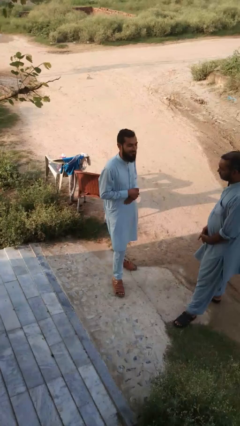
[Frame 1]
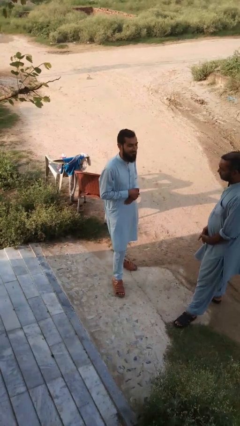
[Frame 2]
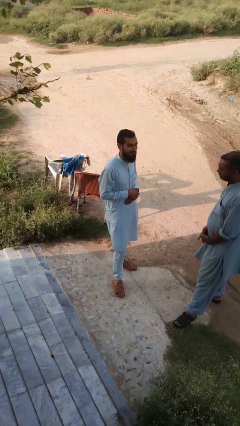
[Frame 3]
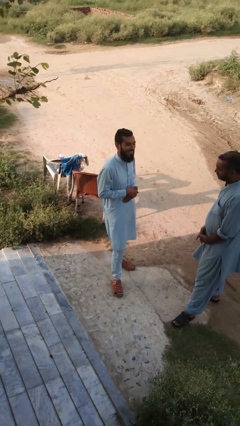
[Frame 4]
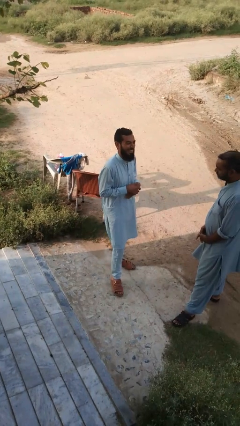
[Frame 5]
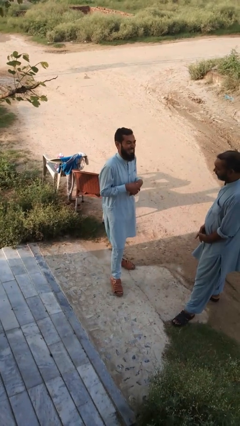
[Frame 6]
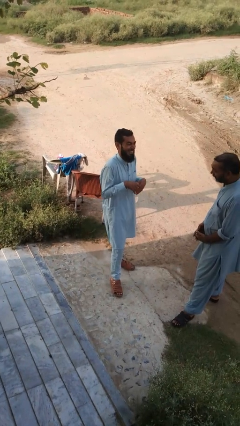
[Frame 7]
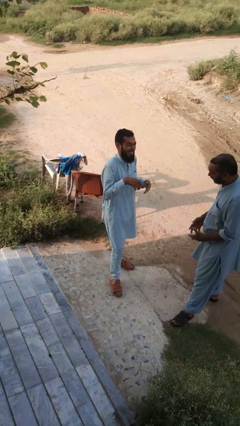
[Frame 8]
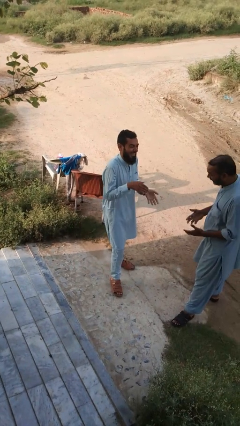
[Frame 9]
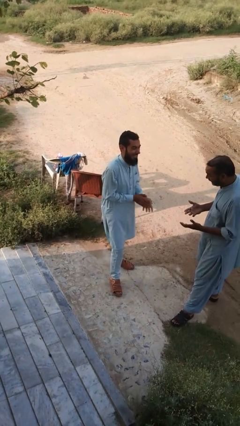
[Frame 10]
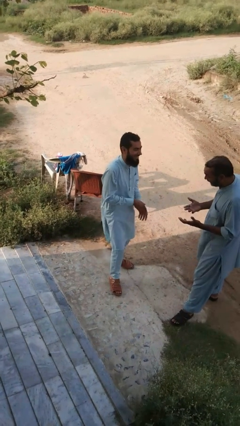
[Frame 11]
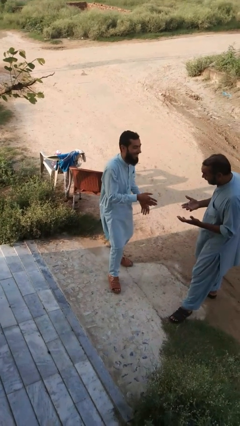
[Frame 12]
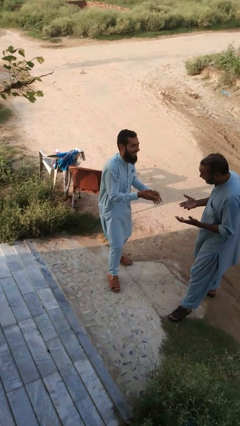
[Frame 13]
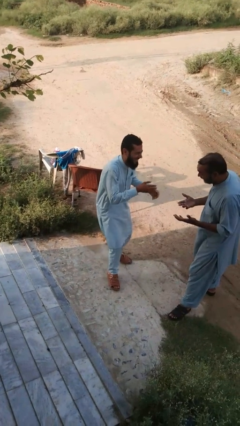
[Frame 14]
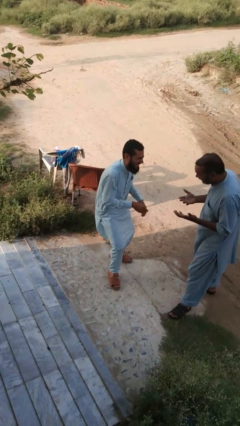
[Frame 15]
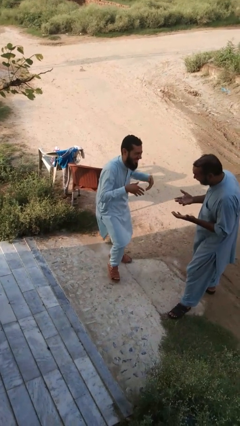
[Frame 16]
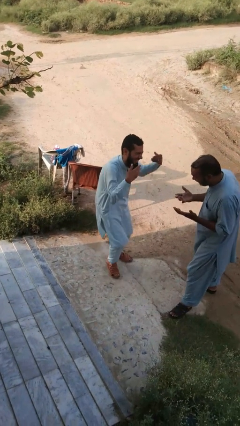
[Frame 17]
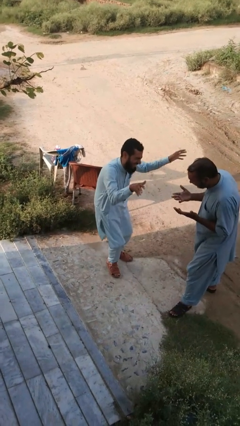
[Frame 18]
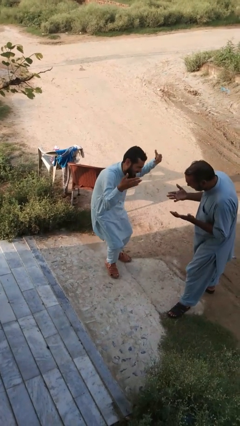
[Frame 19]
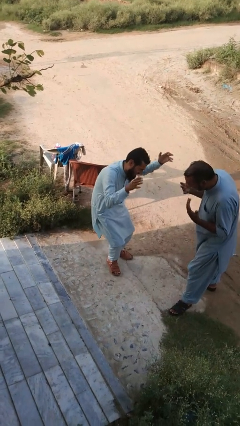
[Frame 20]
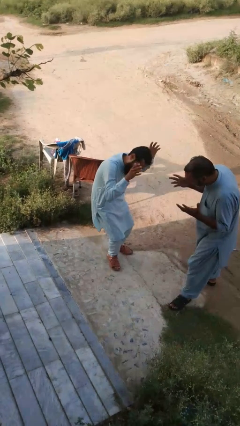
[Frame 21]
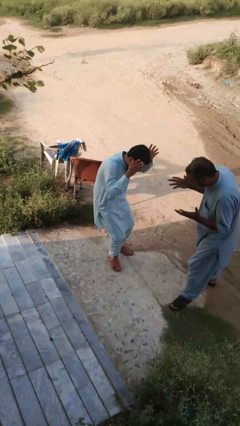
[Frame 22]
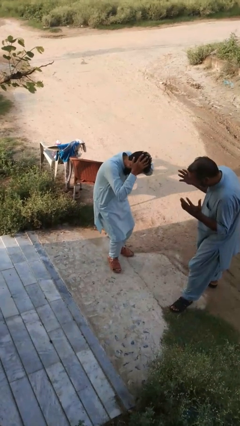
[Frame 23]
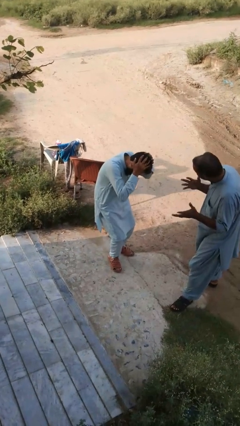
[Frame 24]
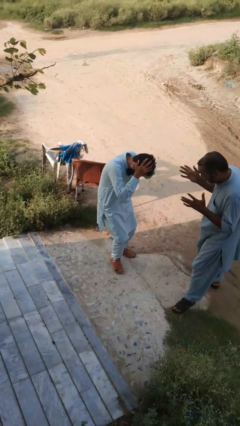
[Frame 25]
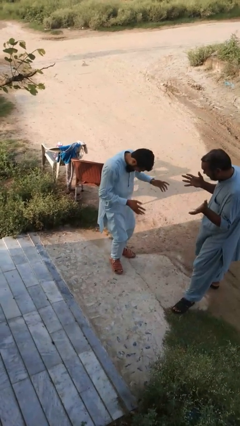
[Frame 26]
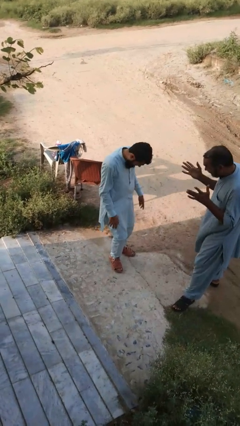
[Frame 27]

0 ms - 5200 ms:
person laughs with person

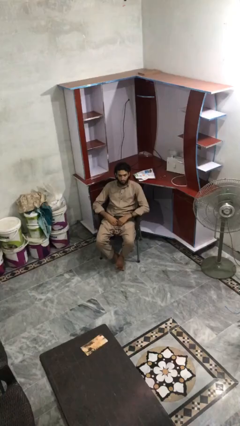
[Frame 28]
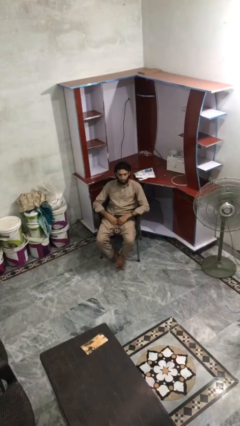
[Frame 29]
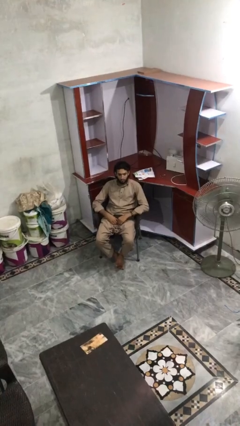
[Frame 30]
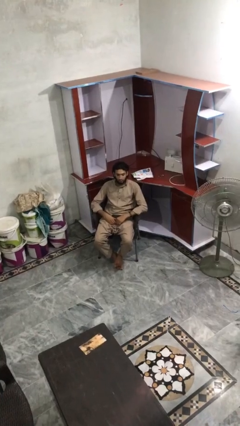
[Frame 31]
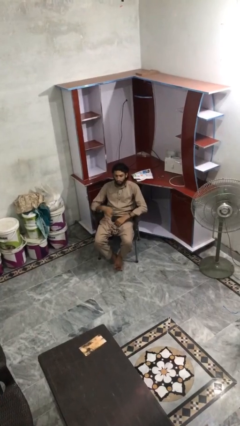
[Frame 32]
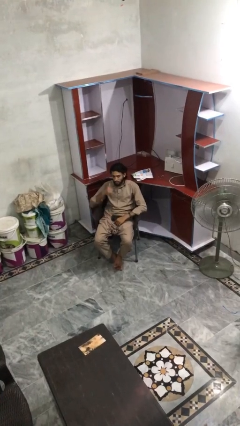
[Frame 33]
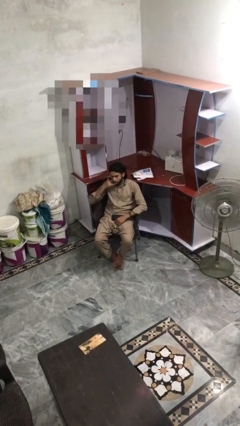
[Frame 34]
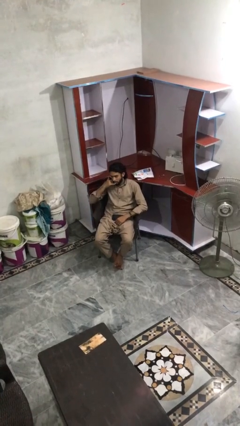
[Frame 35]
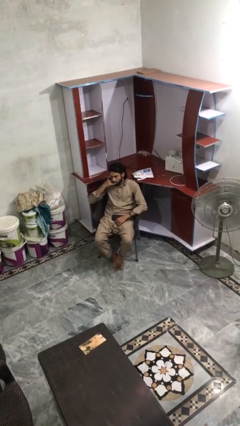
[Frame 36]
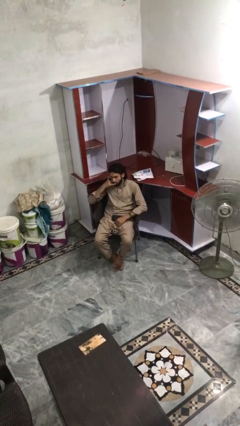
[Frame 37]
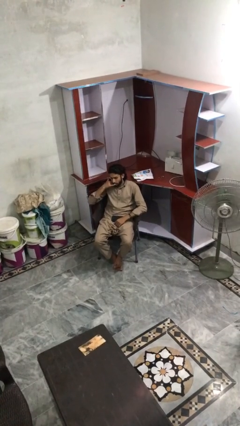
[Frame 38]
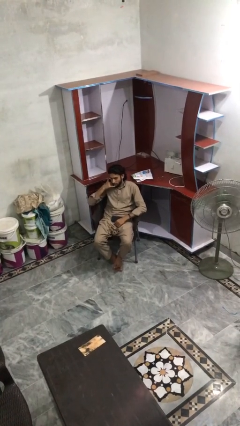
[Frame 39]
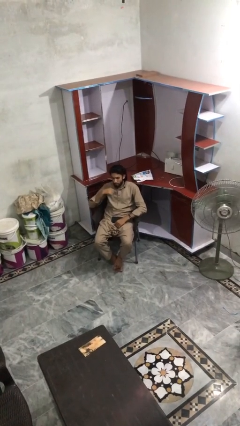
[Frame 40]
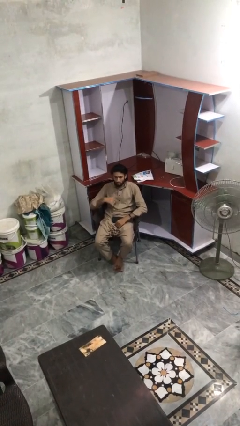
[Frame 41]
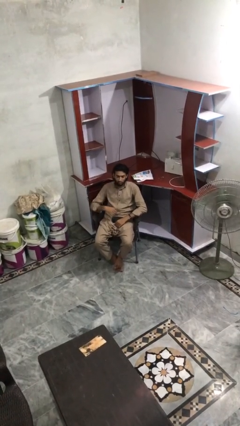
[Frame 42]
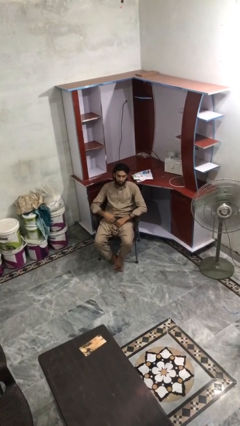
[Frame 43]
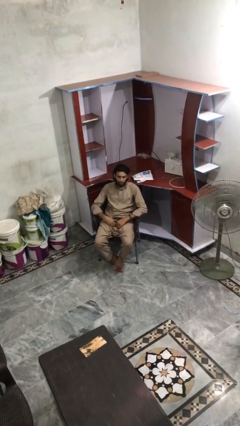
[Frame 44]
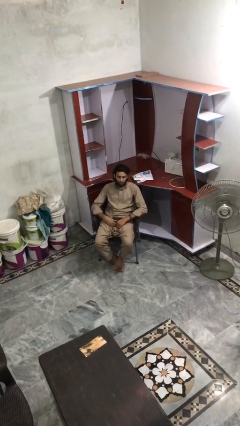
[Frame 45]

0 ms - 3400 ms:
person gestures call me

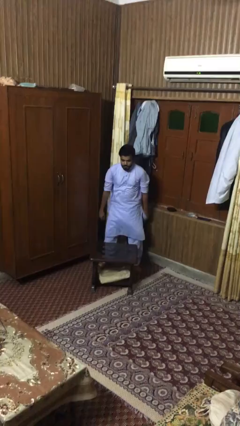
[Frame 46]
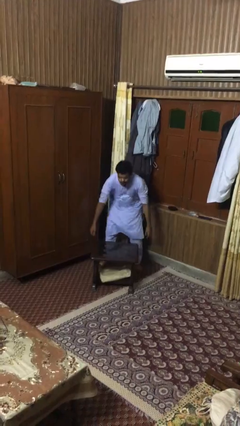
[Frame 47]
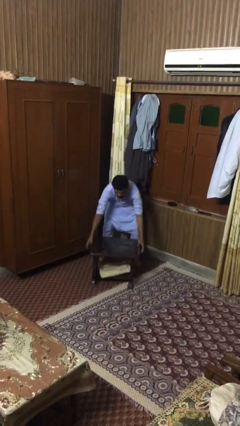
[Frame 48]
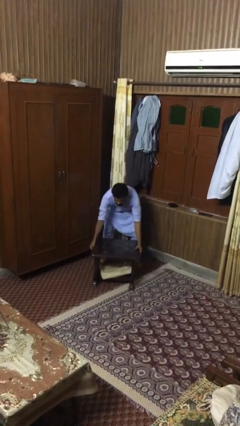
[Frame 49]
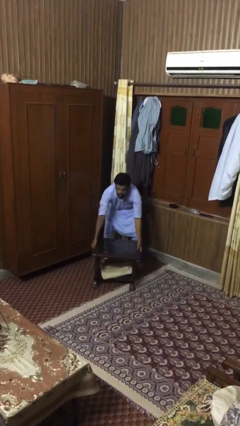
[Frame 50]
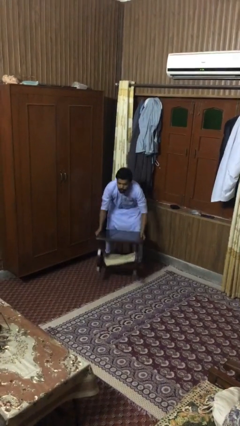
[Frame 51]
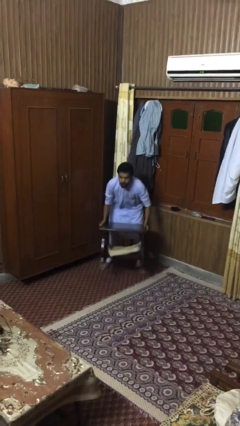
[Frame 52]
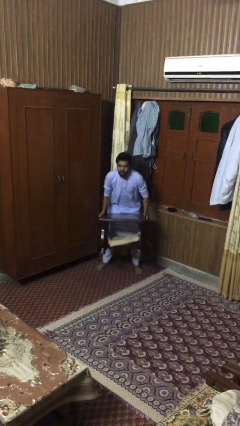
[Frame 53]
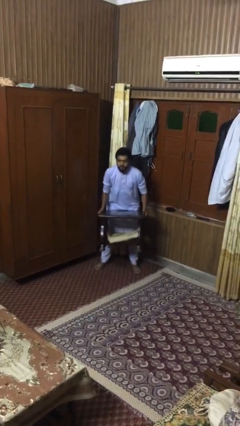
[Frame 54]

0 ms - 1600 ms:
person picks up object from floor

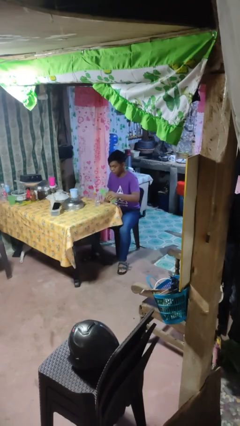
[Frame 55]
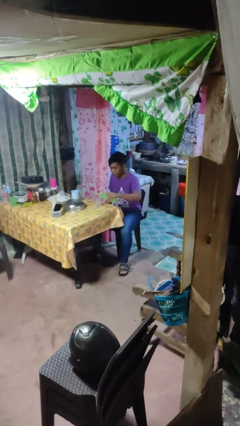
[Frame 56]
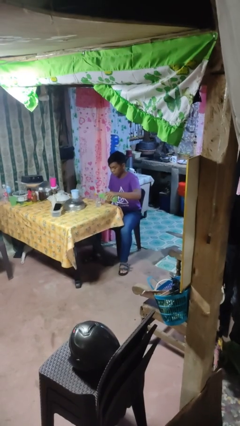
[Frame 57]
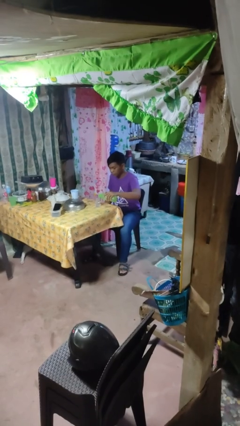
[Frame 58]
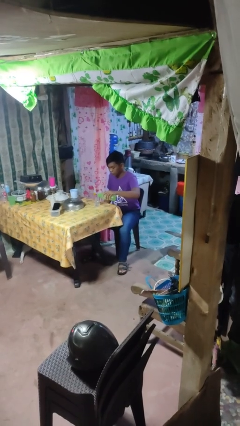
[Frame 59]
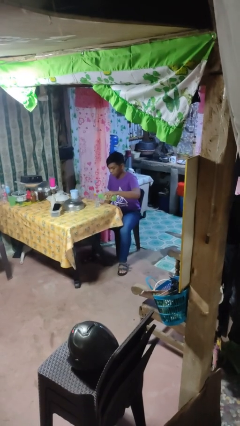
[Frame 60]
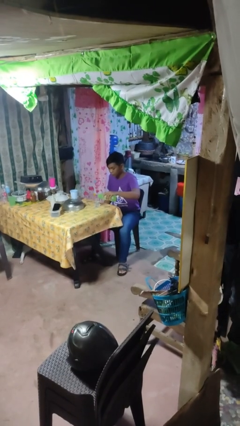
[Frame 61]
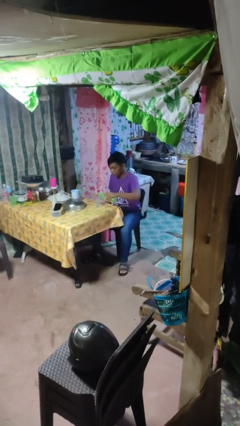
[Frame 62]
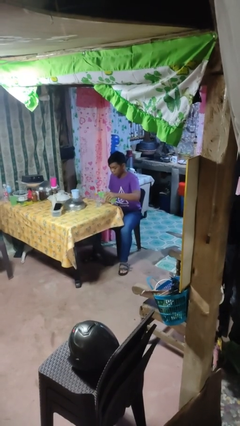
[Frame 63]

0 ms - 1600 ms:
person pours liquid into cup

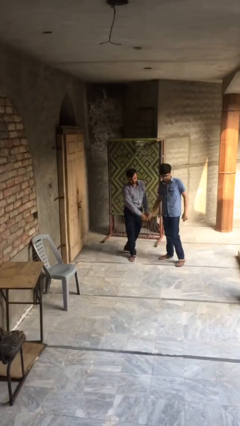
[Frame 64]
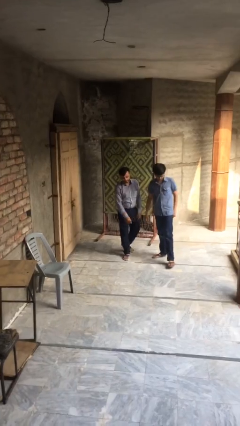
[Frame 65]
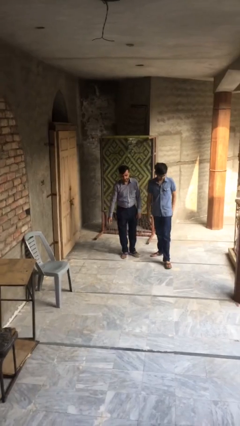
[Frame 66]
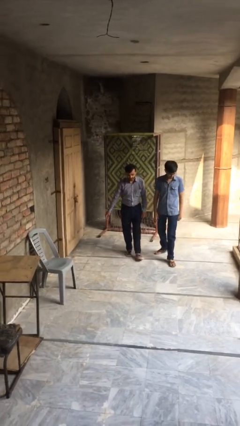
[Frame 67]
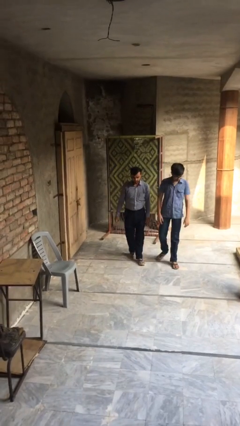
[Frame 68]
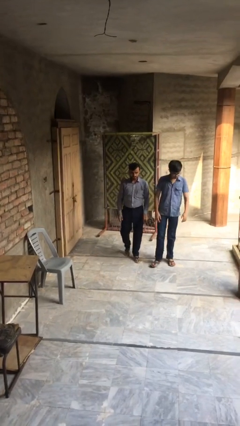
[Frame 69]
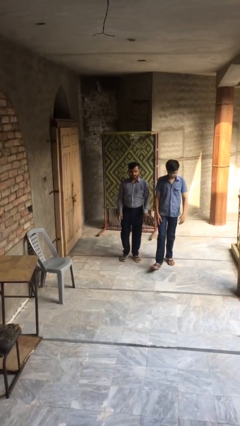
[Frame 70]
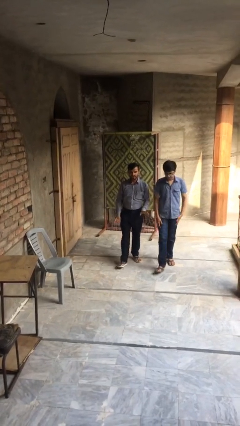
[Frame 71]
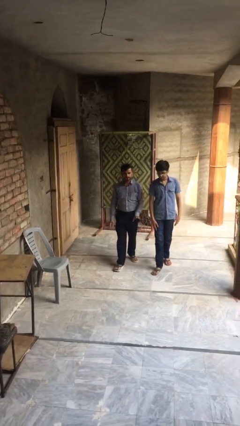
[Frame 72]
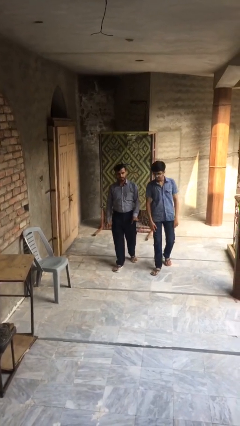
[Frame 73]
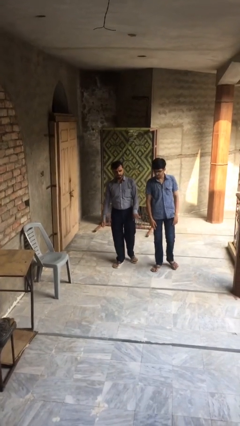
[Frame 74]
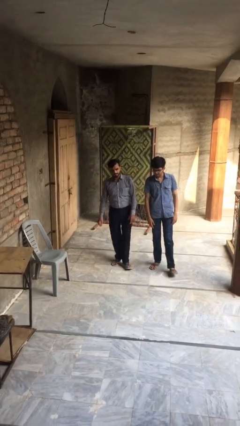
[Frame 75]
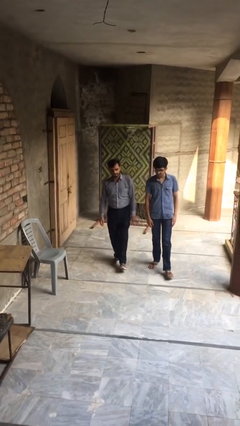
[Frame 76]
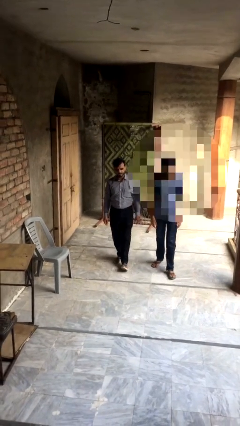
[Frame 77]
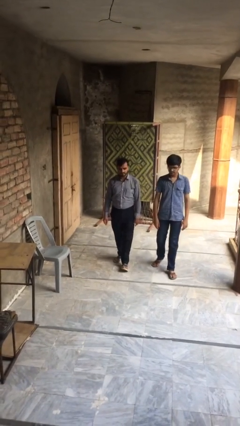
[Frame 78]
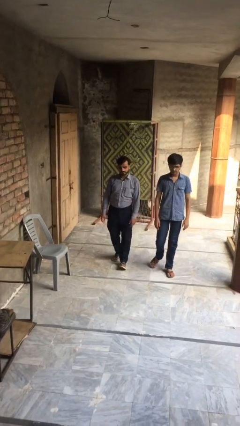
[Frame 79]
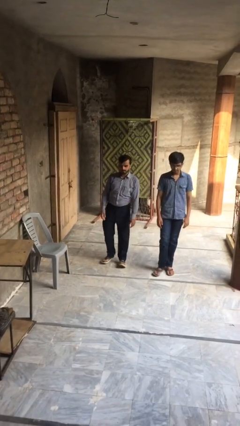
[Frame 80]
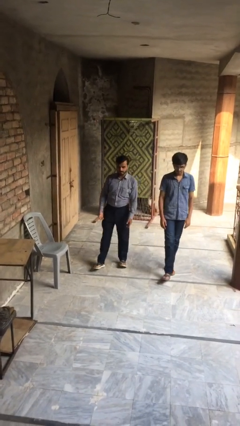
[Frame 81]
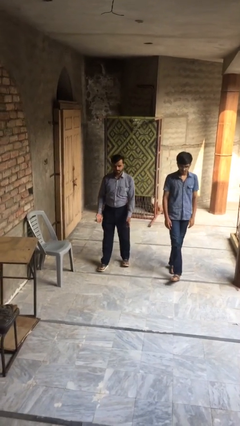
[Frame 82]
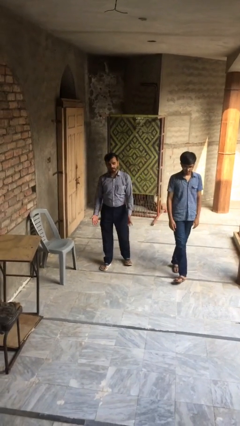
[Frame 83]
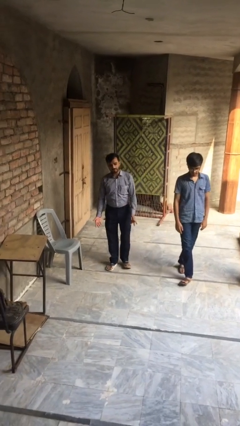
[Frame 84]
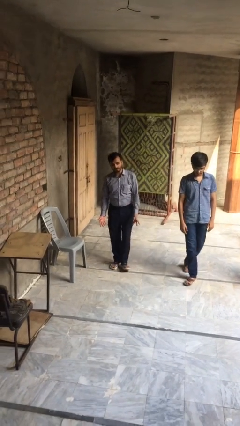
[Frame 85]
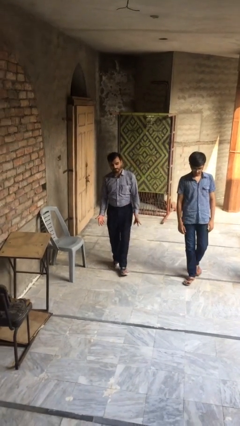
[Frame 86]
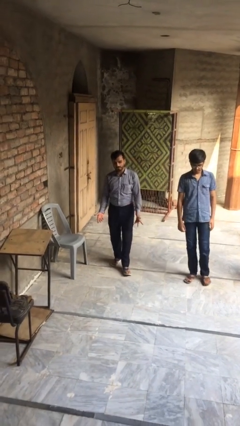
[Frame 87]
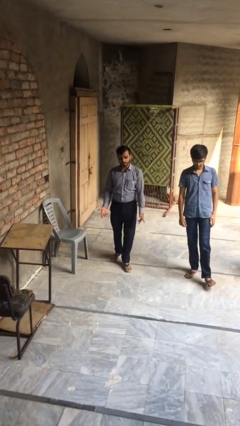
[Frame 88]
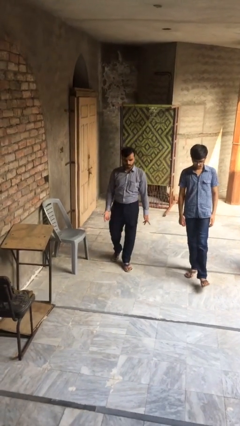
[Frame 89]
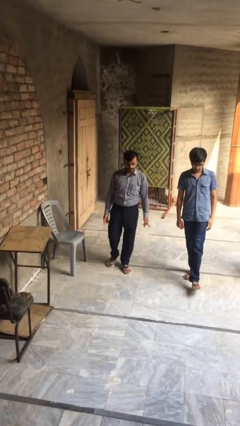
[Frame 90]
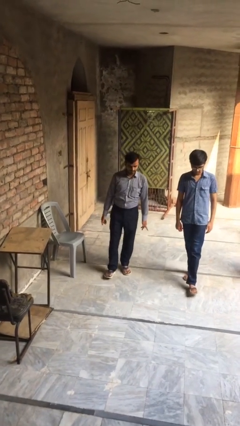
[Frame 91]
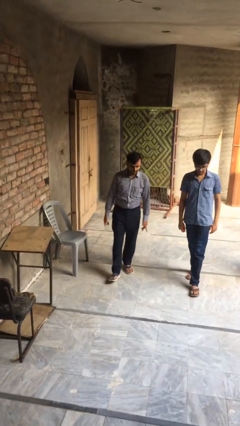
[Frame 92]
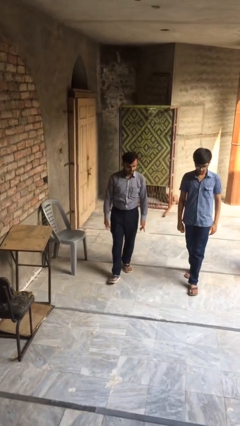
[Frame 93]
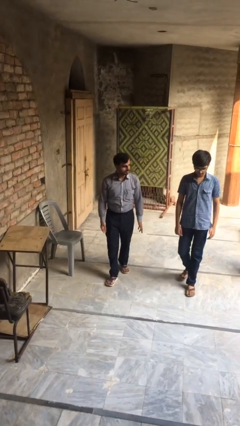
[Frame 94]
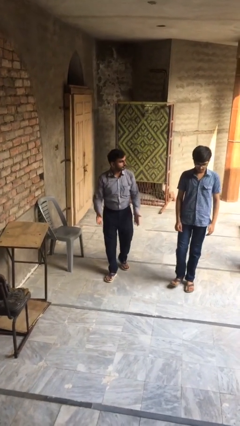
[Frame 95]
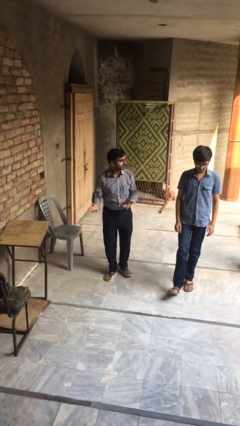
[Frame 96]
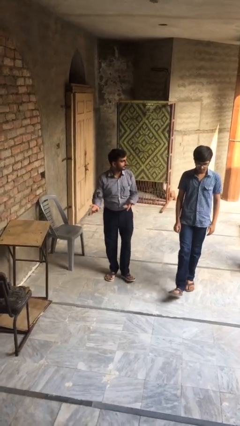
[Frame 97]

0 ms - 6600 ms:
person talks to person
